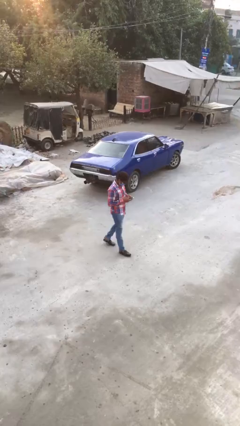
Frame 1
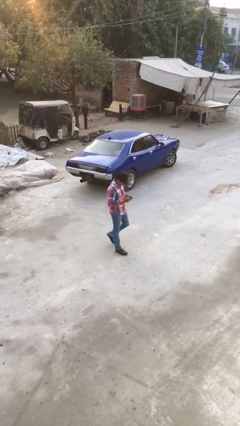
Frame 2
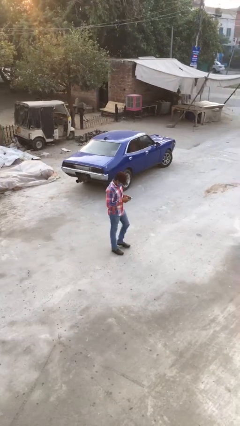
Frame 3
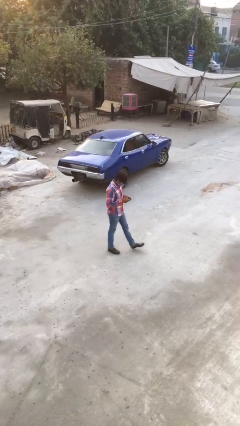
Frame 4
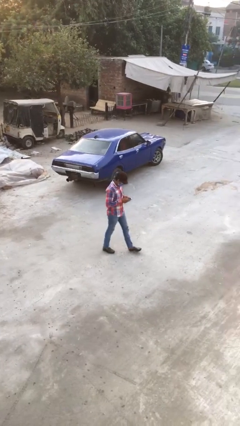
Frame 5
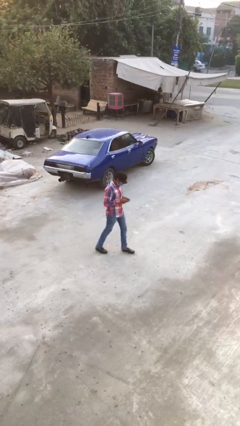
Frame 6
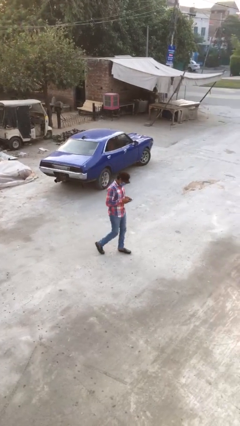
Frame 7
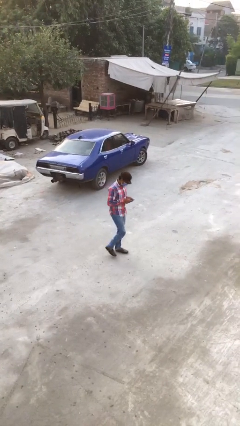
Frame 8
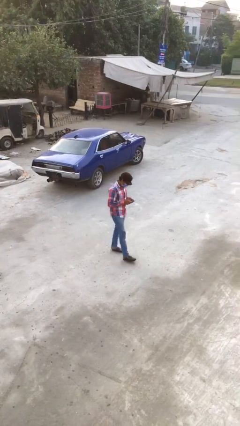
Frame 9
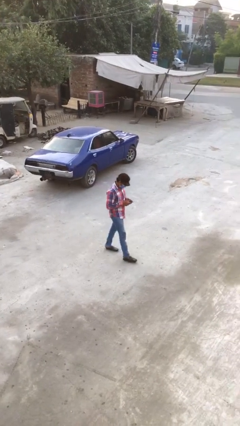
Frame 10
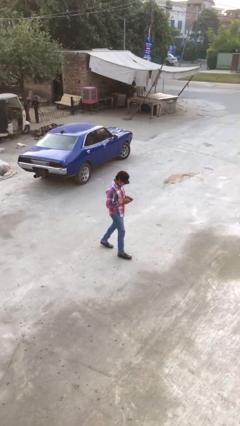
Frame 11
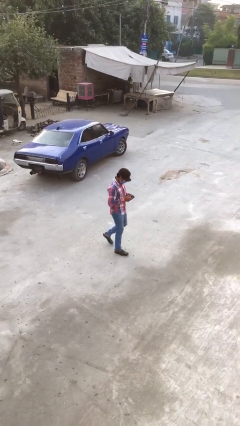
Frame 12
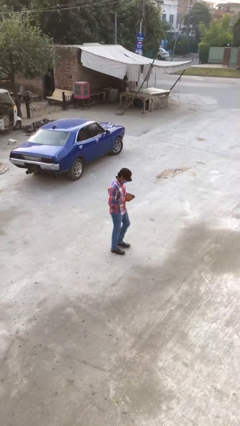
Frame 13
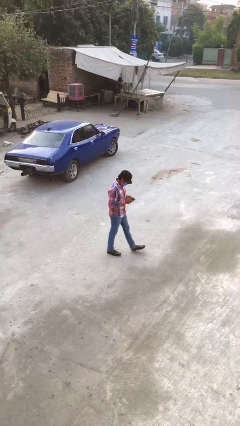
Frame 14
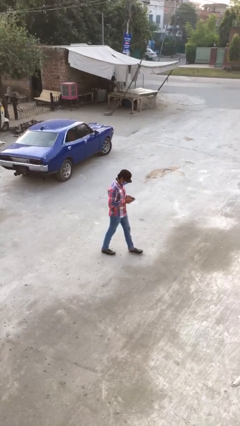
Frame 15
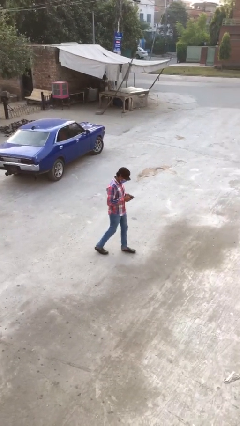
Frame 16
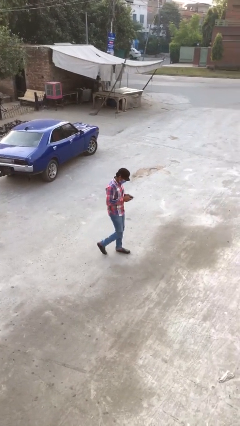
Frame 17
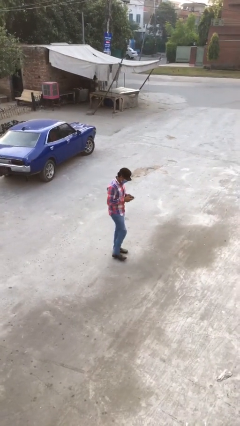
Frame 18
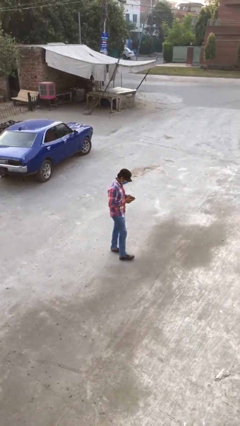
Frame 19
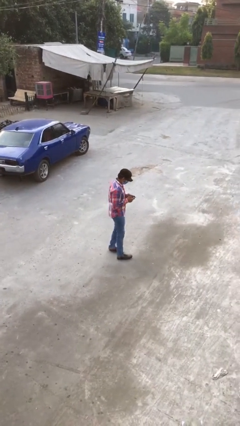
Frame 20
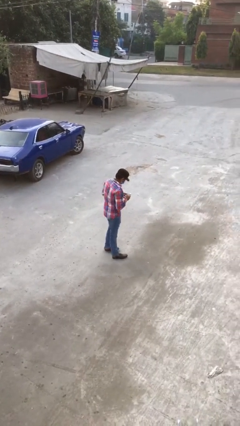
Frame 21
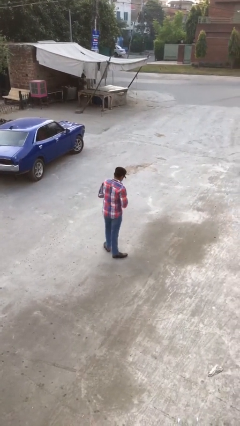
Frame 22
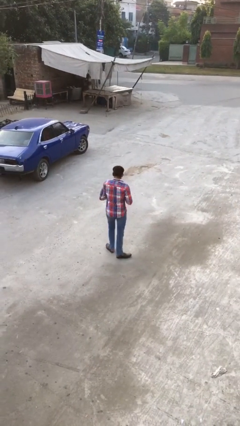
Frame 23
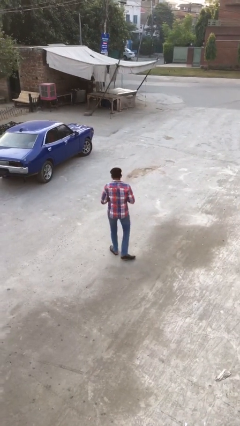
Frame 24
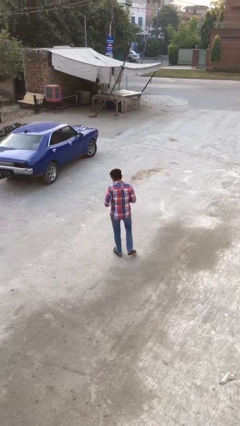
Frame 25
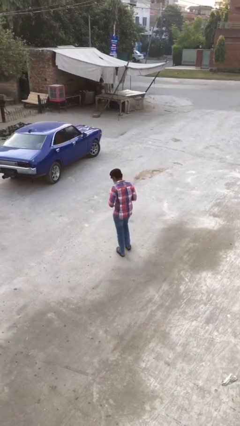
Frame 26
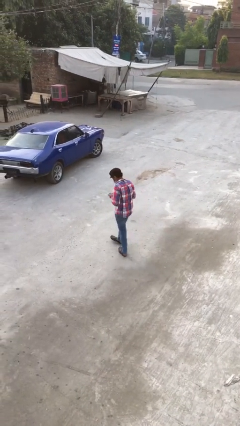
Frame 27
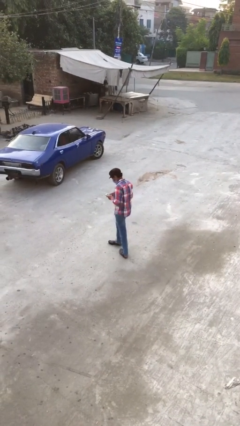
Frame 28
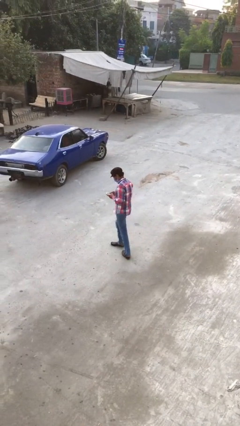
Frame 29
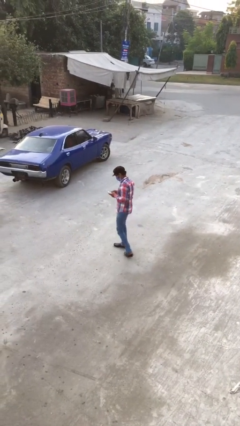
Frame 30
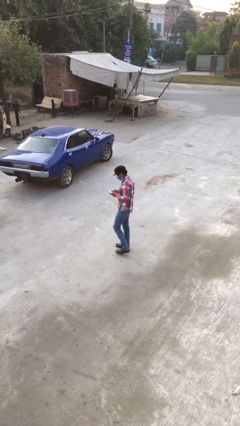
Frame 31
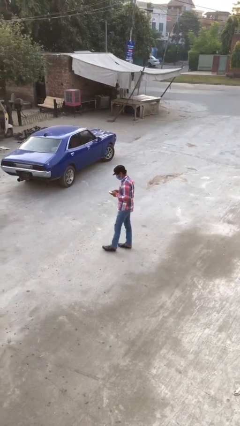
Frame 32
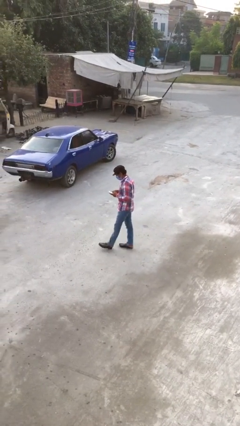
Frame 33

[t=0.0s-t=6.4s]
person texts on phone

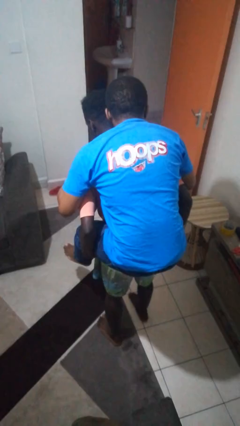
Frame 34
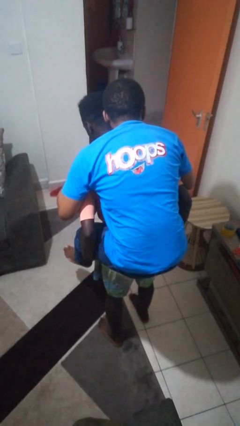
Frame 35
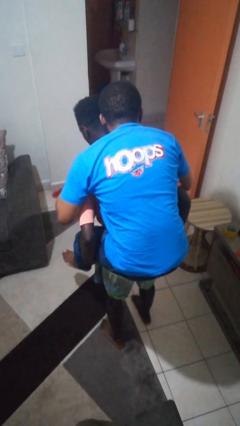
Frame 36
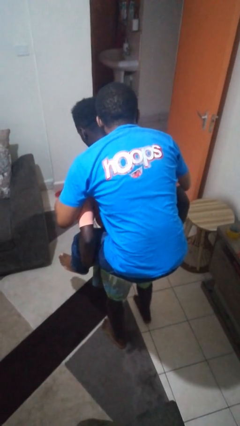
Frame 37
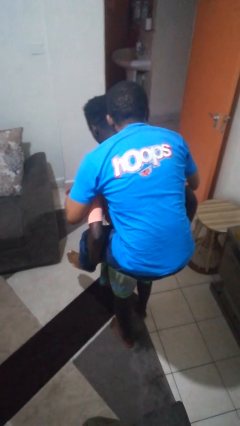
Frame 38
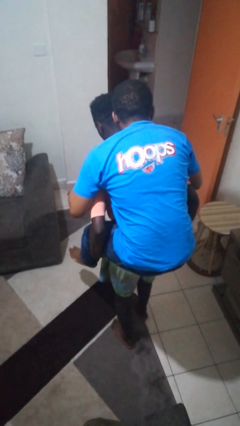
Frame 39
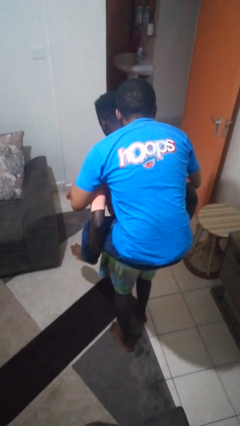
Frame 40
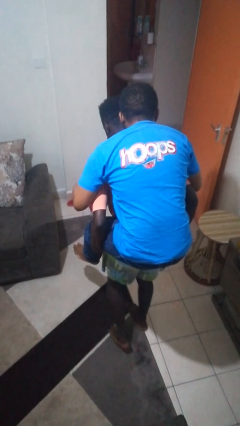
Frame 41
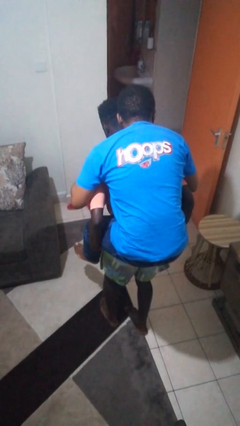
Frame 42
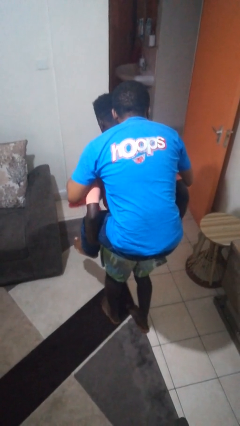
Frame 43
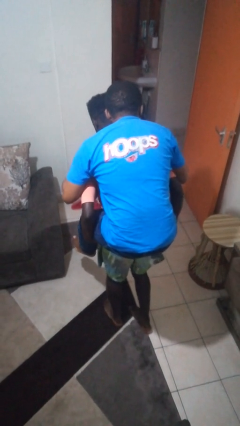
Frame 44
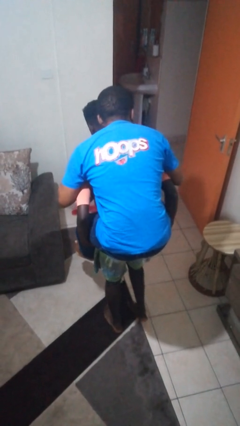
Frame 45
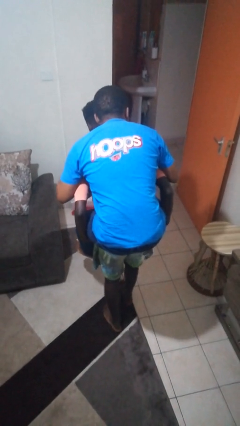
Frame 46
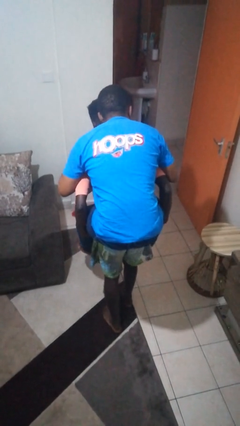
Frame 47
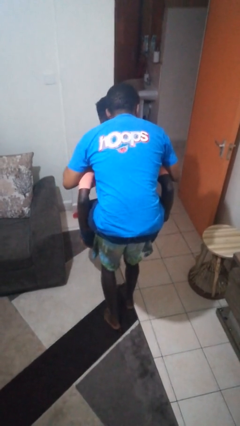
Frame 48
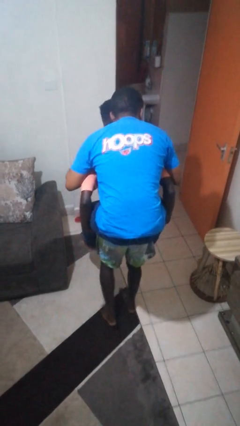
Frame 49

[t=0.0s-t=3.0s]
person carries person on back

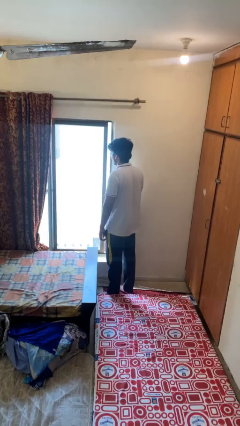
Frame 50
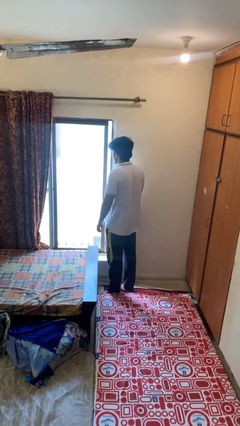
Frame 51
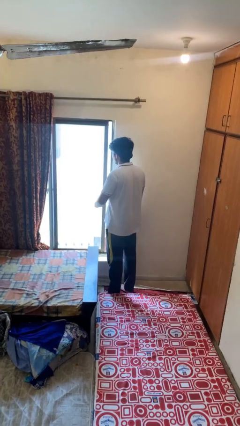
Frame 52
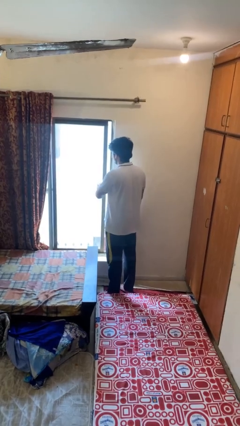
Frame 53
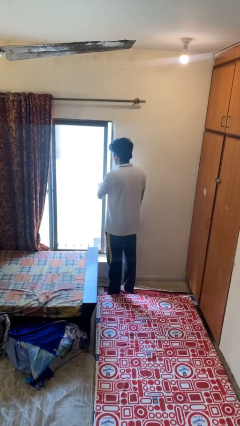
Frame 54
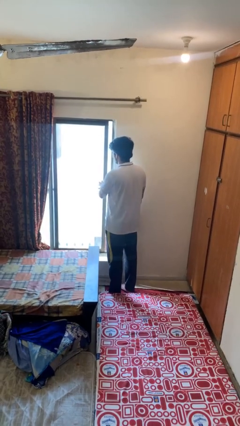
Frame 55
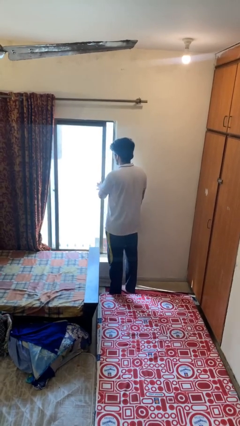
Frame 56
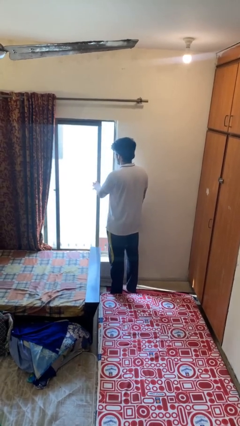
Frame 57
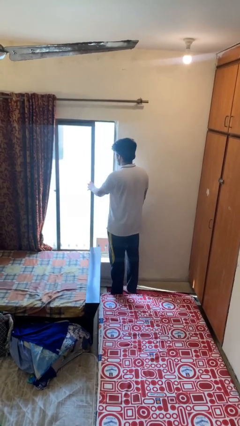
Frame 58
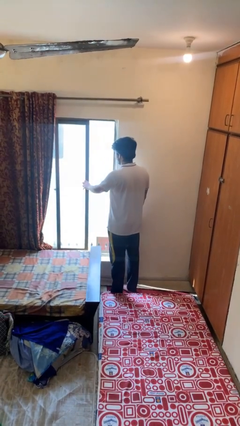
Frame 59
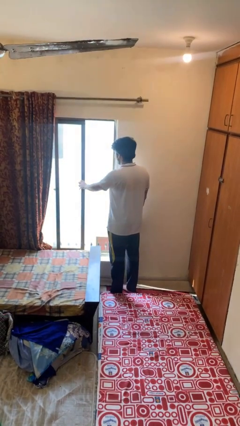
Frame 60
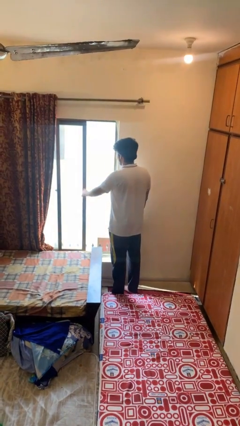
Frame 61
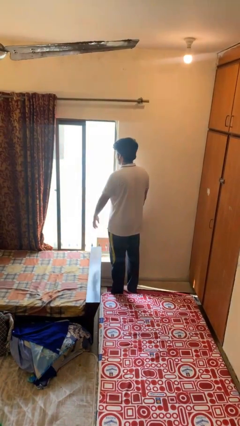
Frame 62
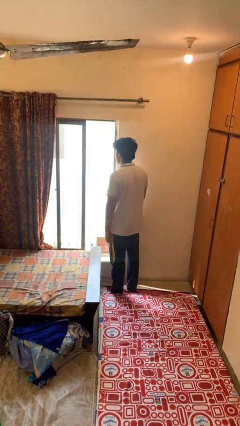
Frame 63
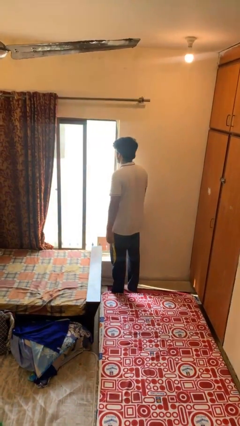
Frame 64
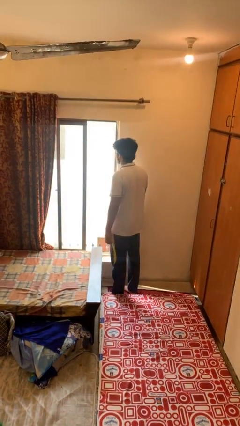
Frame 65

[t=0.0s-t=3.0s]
person opens home window

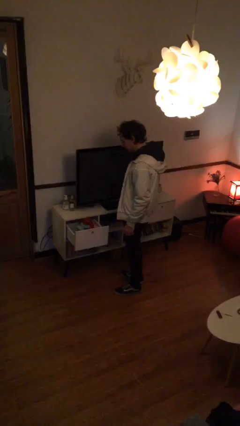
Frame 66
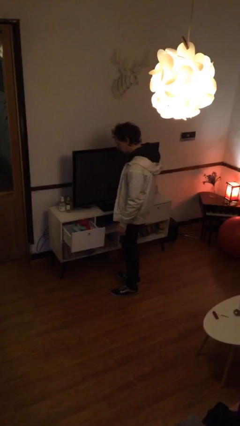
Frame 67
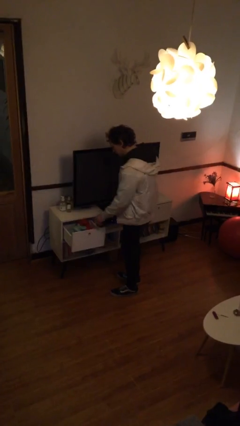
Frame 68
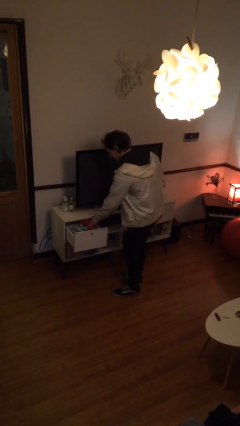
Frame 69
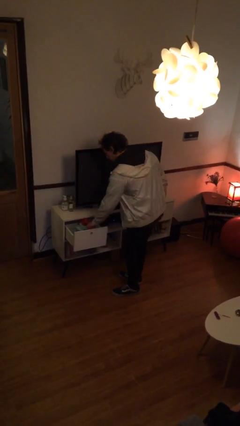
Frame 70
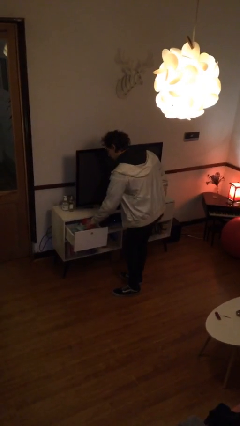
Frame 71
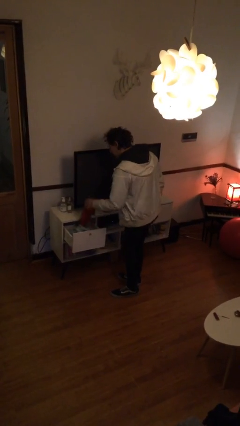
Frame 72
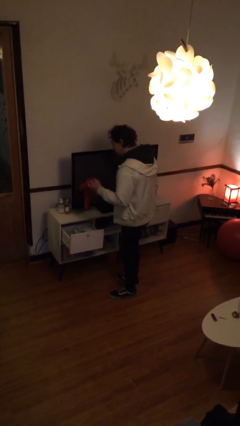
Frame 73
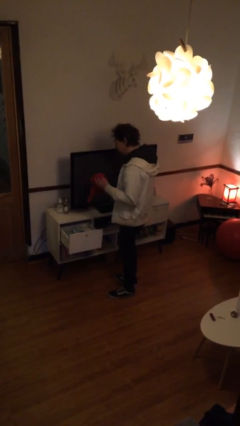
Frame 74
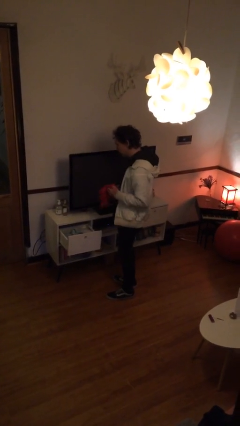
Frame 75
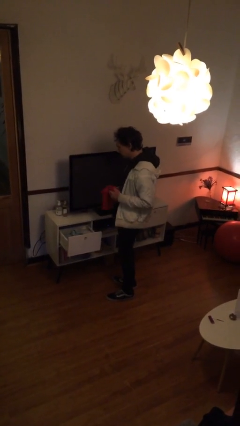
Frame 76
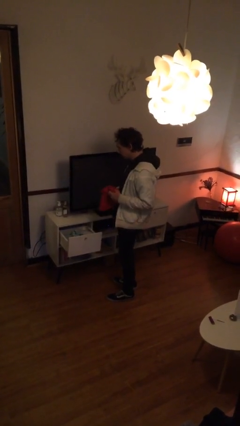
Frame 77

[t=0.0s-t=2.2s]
person takes clothes from dresser

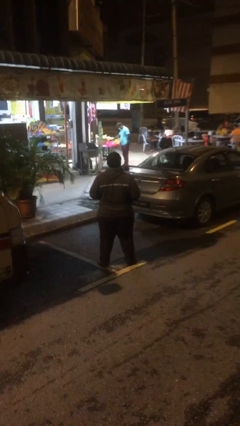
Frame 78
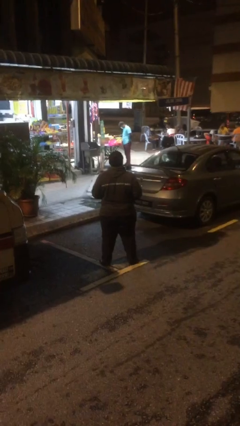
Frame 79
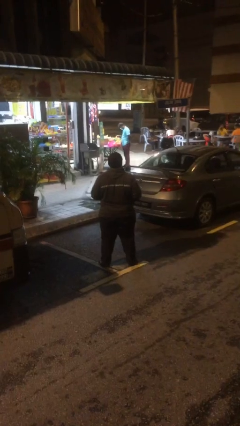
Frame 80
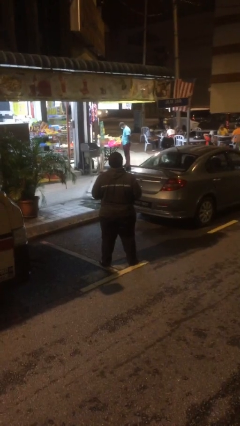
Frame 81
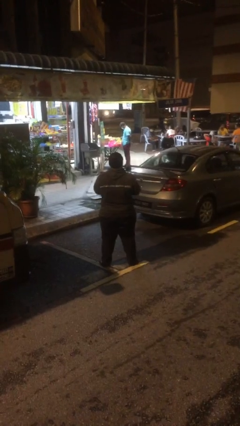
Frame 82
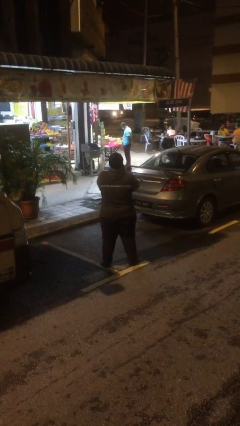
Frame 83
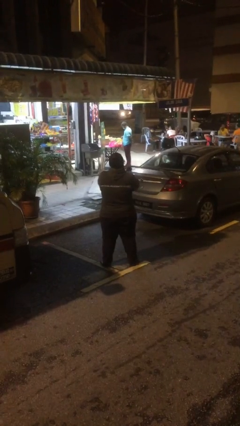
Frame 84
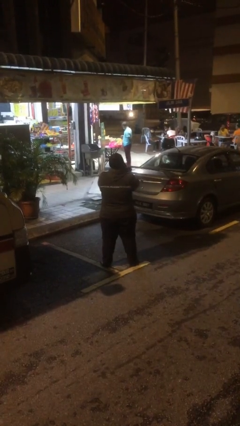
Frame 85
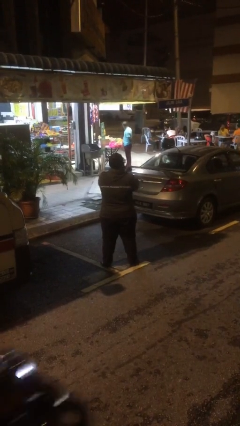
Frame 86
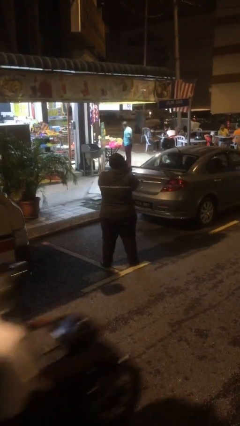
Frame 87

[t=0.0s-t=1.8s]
person blows into hands

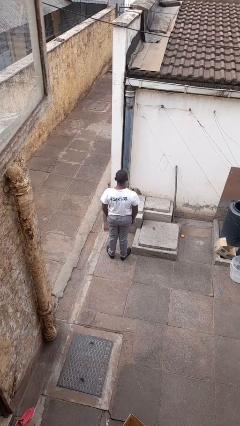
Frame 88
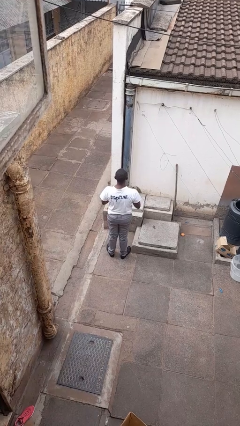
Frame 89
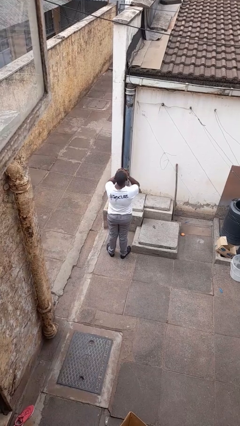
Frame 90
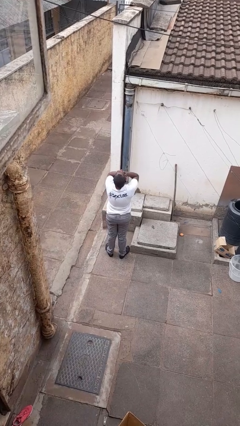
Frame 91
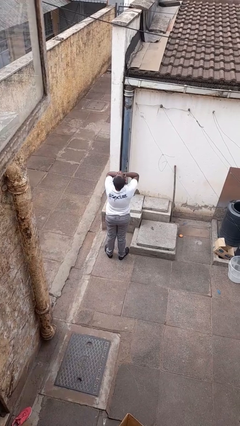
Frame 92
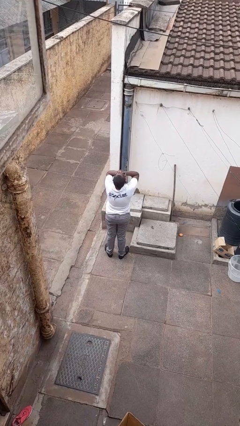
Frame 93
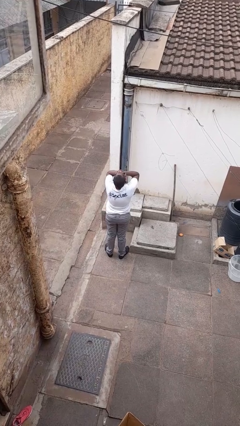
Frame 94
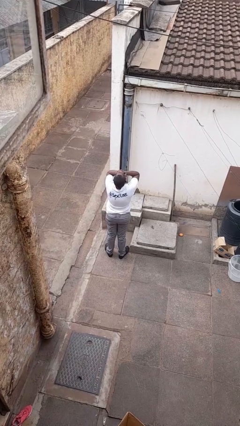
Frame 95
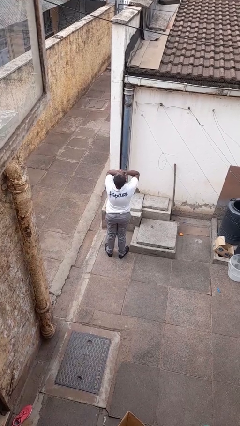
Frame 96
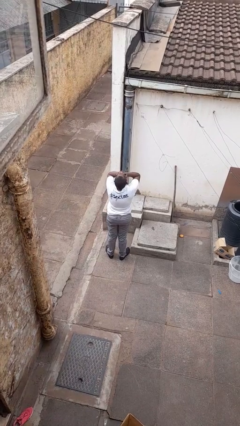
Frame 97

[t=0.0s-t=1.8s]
person covers face with hands
